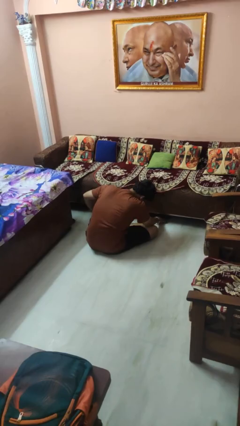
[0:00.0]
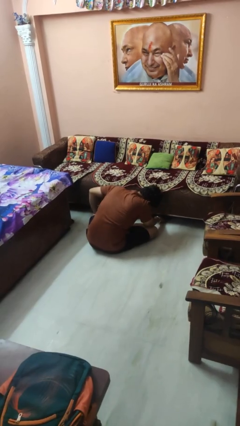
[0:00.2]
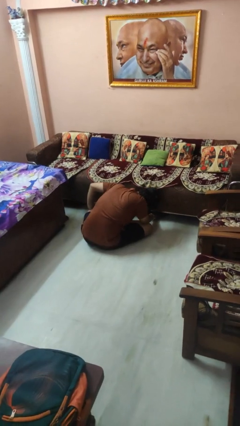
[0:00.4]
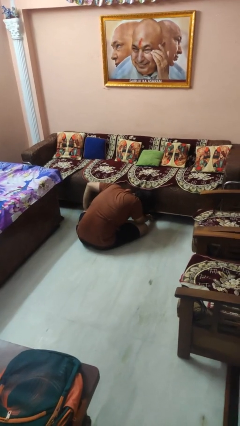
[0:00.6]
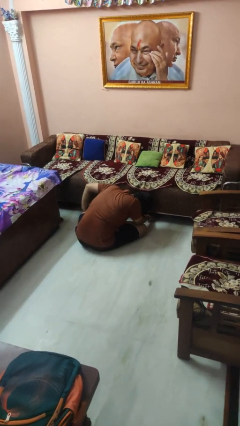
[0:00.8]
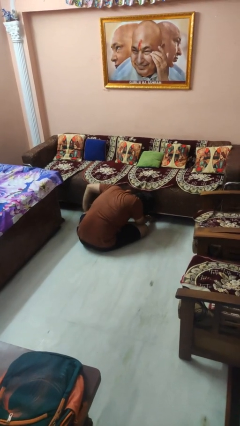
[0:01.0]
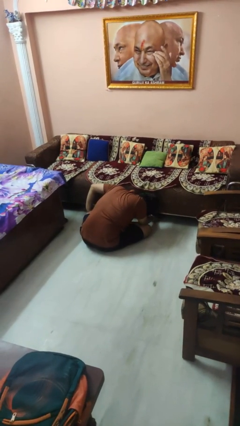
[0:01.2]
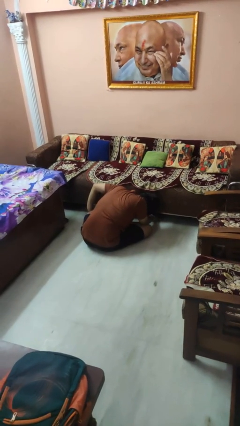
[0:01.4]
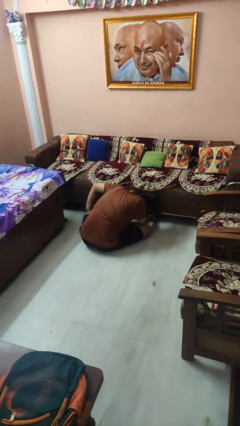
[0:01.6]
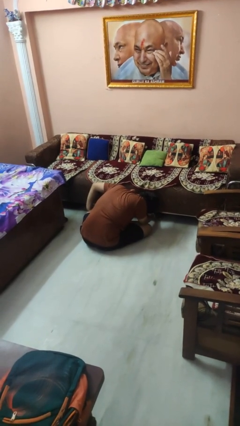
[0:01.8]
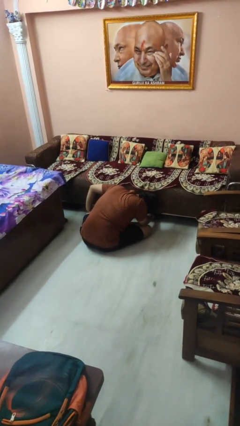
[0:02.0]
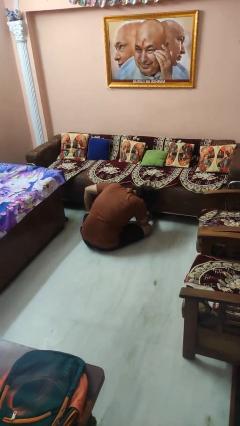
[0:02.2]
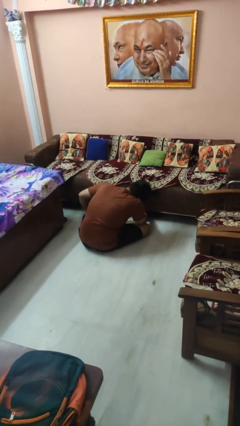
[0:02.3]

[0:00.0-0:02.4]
person searches under couch

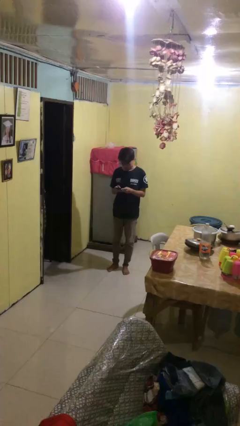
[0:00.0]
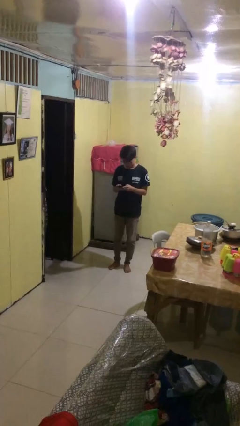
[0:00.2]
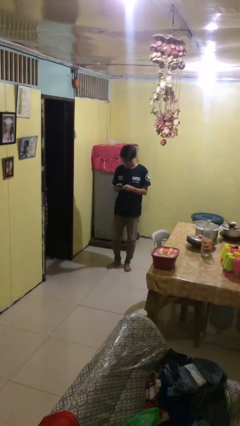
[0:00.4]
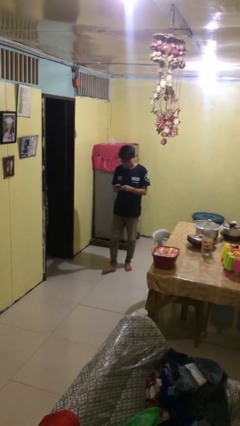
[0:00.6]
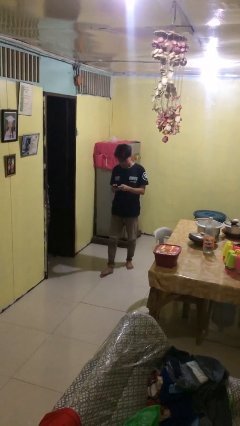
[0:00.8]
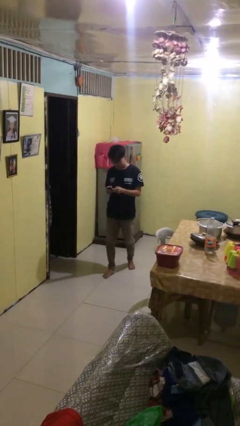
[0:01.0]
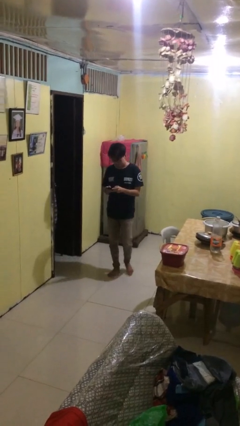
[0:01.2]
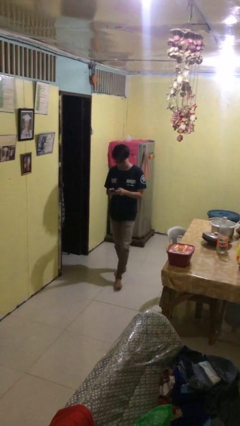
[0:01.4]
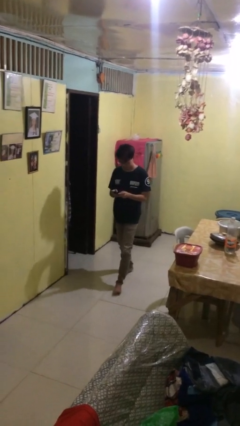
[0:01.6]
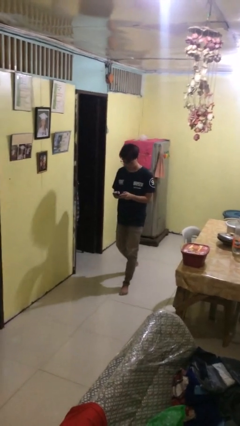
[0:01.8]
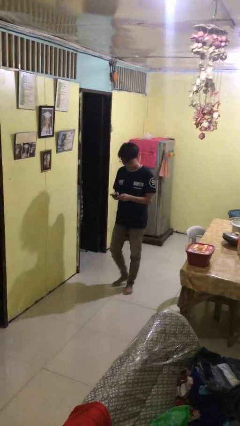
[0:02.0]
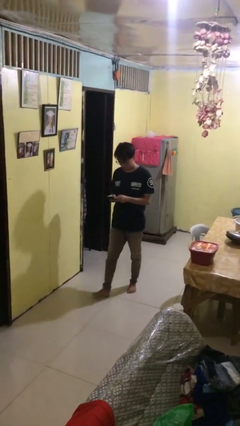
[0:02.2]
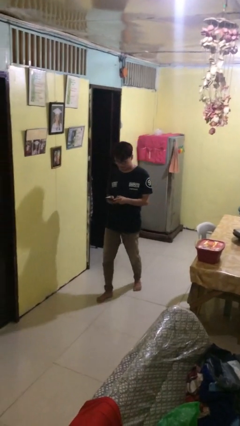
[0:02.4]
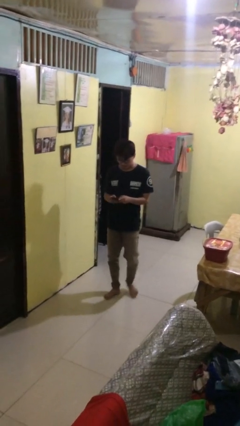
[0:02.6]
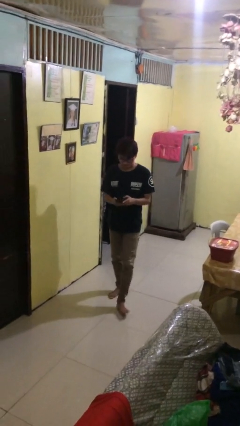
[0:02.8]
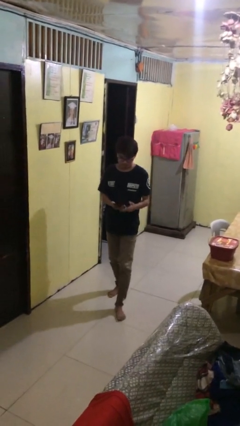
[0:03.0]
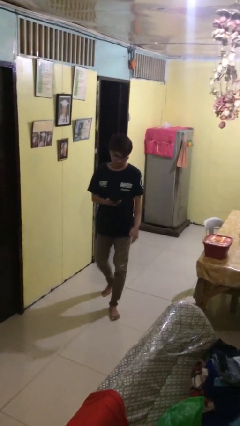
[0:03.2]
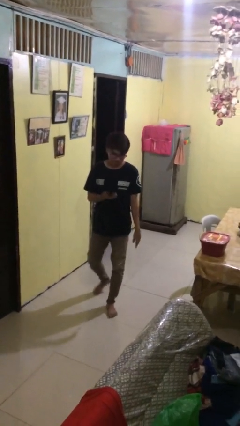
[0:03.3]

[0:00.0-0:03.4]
person texts on phone

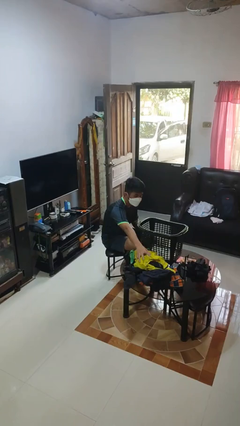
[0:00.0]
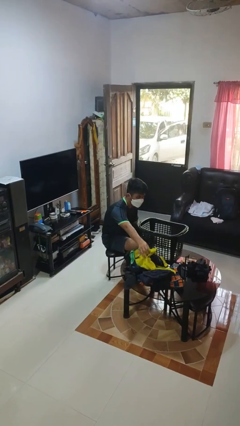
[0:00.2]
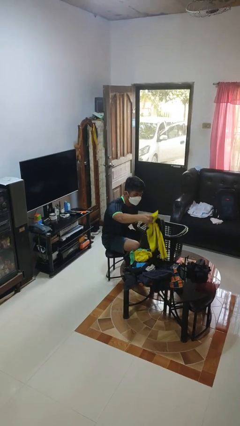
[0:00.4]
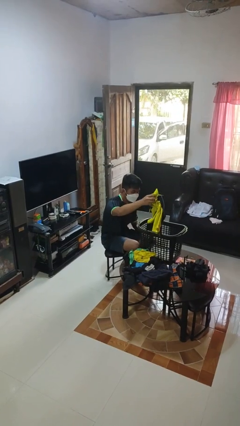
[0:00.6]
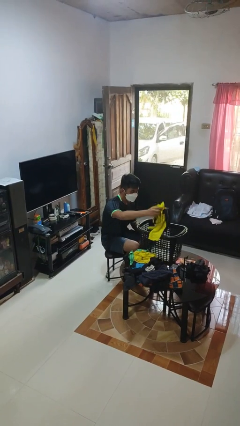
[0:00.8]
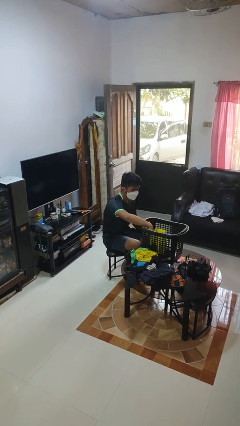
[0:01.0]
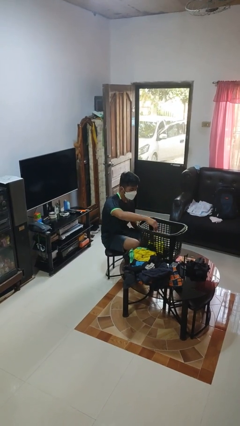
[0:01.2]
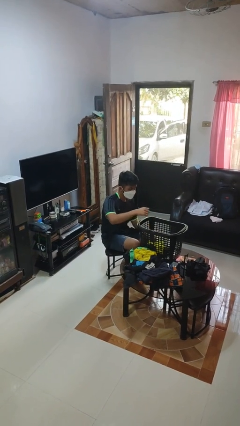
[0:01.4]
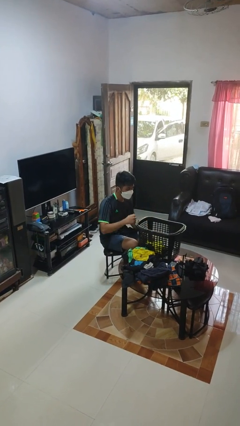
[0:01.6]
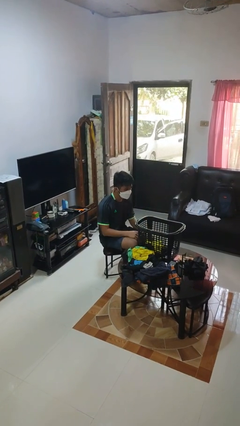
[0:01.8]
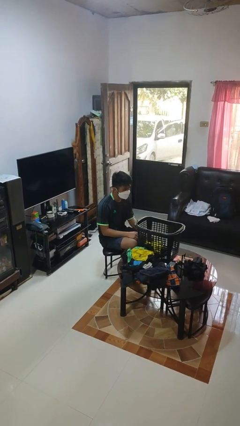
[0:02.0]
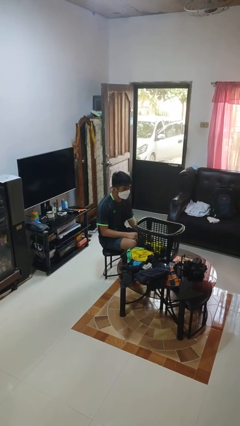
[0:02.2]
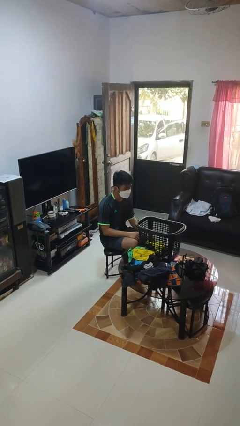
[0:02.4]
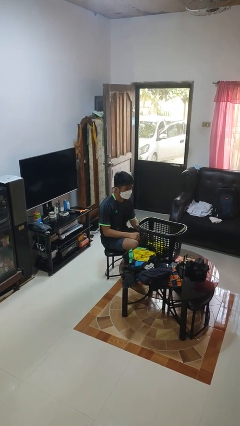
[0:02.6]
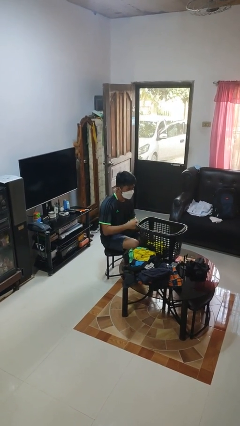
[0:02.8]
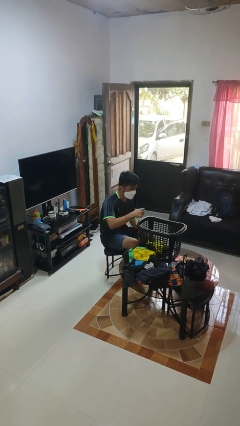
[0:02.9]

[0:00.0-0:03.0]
person puts object into basket

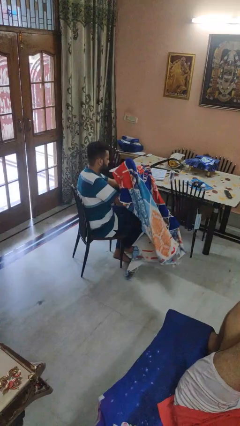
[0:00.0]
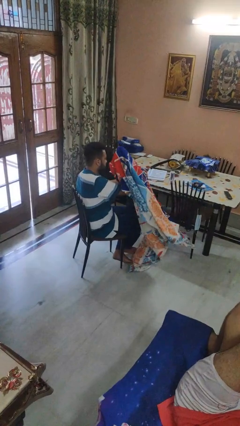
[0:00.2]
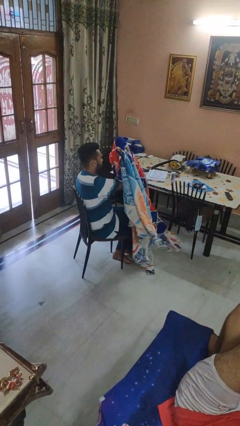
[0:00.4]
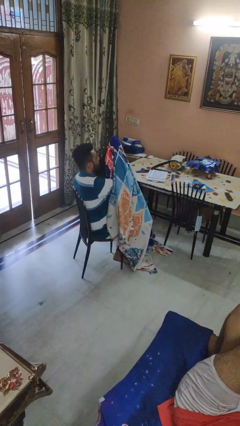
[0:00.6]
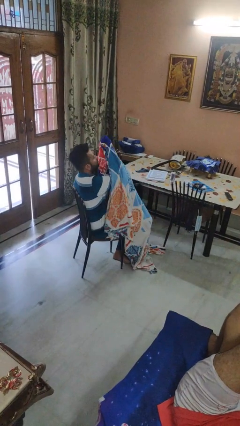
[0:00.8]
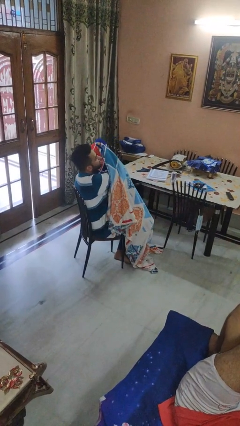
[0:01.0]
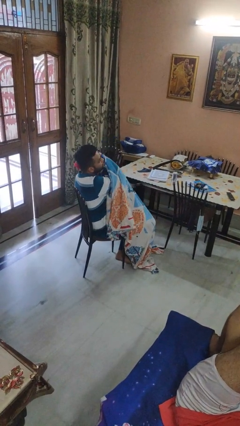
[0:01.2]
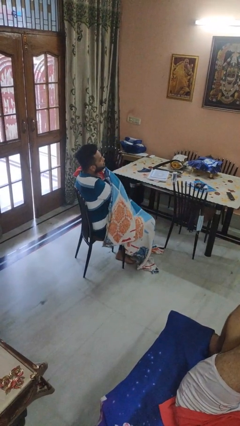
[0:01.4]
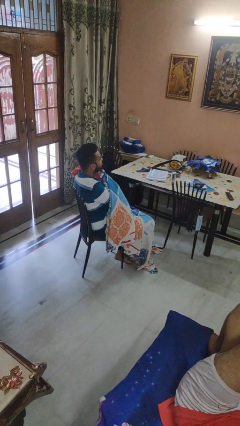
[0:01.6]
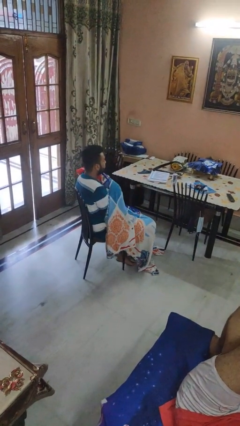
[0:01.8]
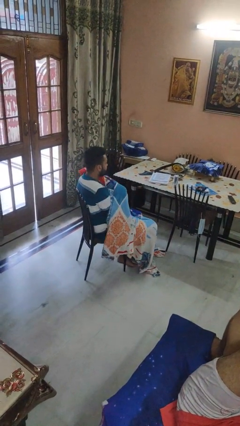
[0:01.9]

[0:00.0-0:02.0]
person covers with blanket

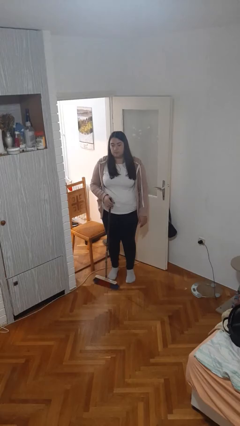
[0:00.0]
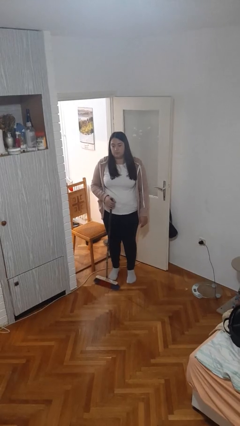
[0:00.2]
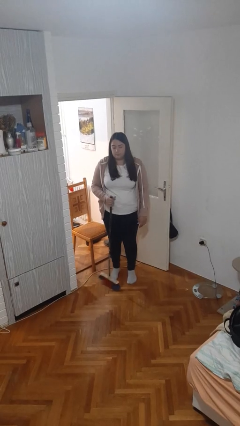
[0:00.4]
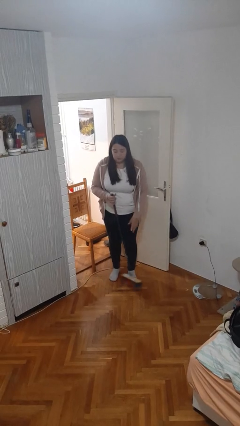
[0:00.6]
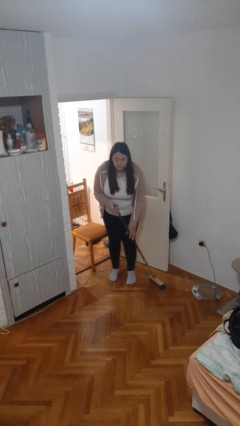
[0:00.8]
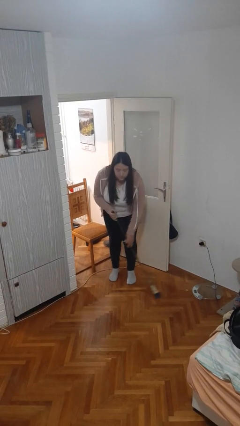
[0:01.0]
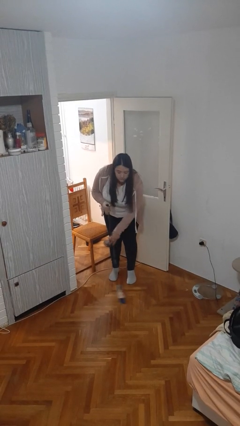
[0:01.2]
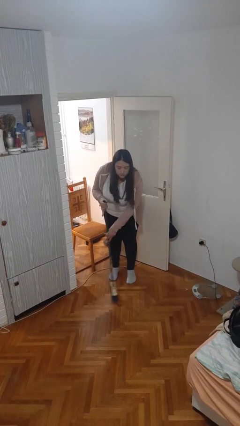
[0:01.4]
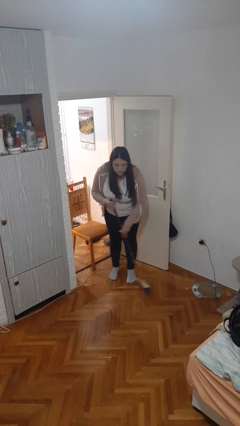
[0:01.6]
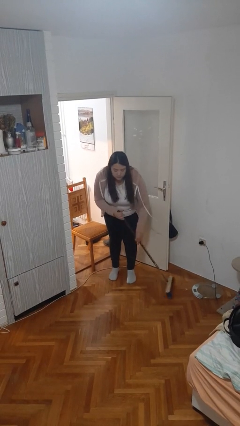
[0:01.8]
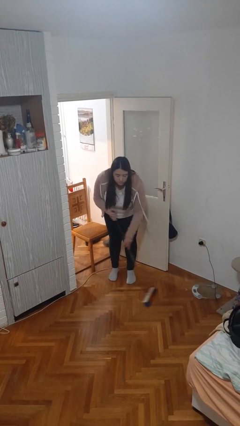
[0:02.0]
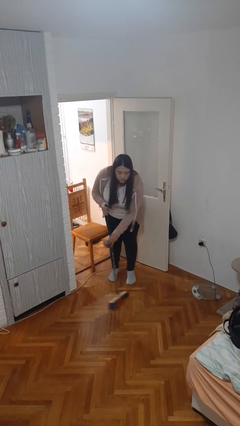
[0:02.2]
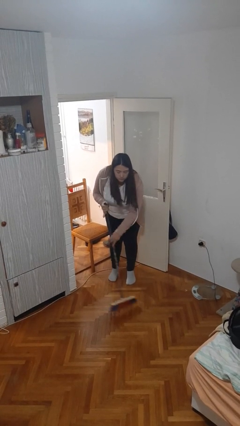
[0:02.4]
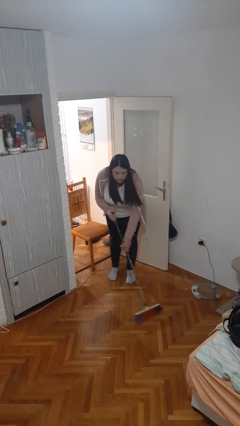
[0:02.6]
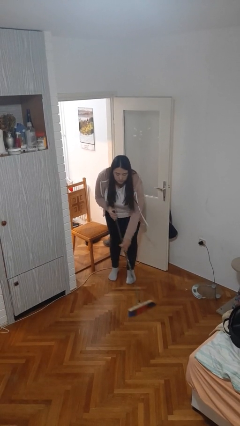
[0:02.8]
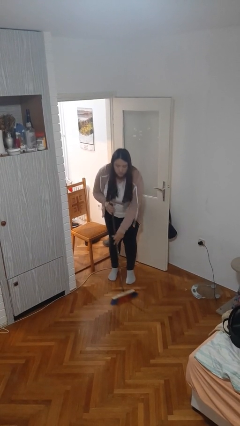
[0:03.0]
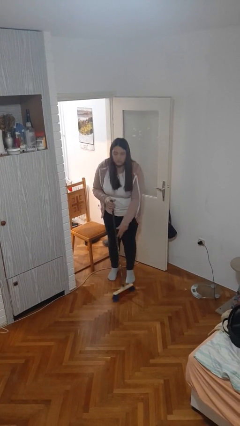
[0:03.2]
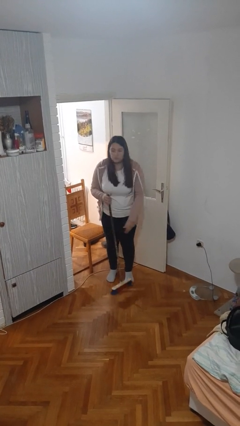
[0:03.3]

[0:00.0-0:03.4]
person sweeps floor

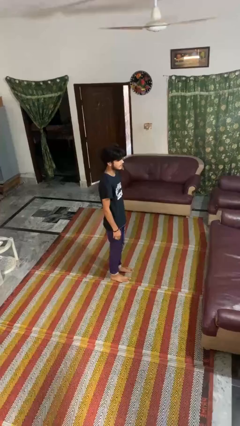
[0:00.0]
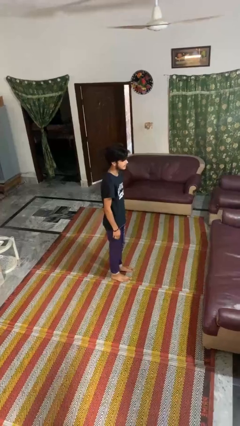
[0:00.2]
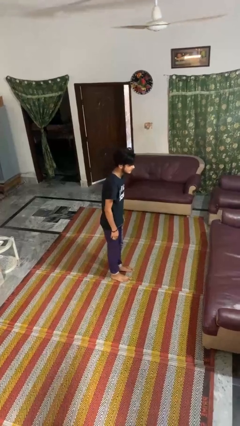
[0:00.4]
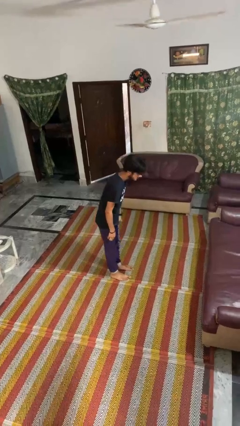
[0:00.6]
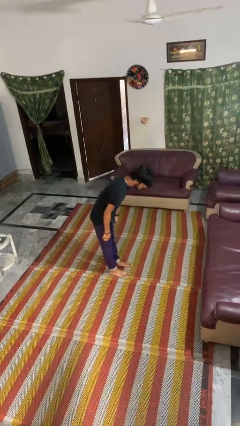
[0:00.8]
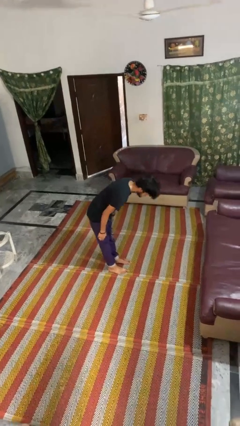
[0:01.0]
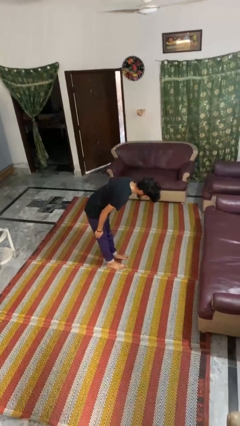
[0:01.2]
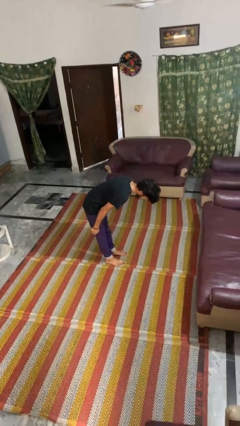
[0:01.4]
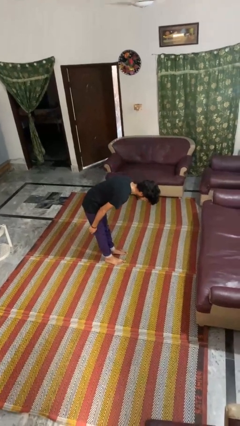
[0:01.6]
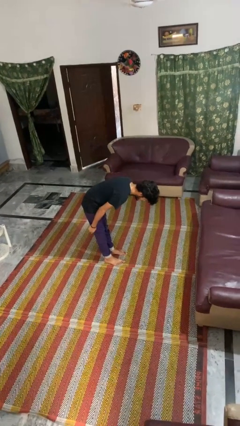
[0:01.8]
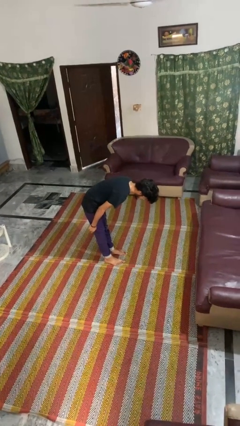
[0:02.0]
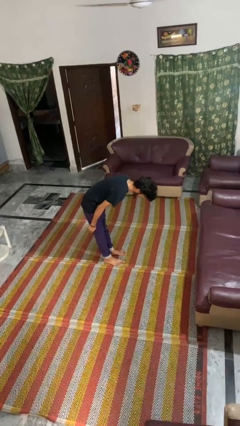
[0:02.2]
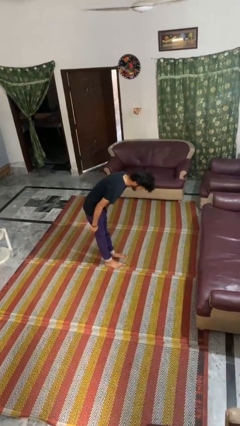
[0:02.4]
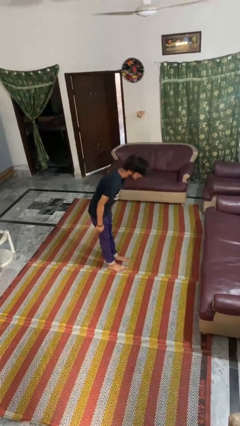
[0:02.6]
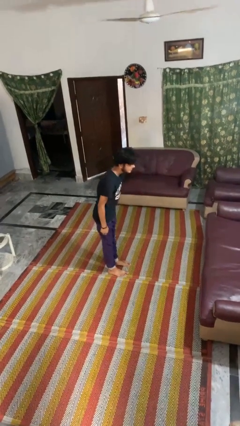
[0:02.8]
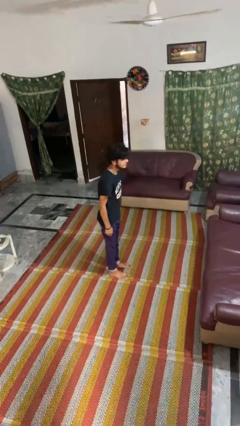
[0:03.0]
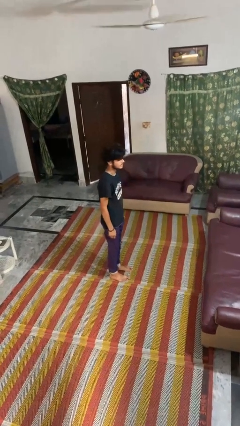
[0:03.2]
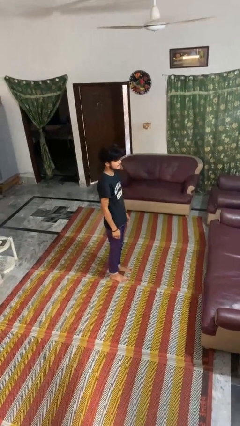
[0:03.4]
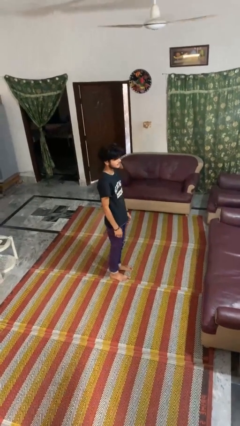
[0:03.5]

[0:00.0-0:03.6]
person bows
